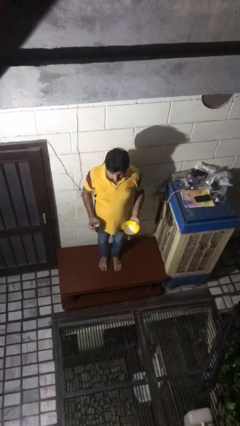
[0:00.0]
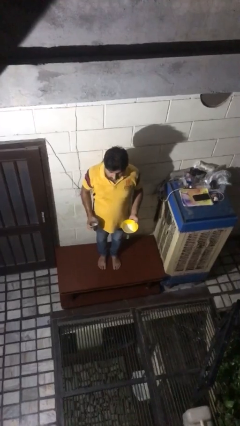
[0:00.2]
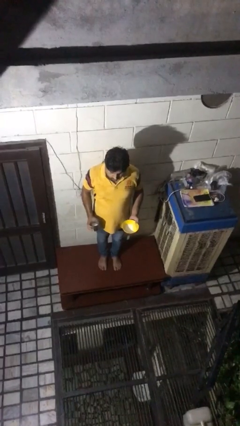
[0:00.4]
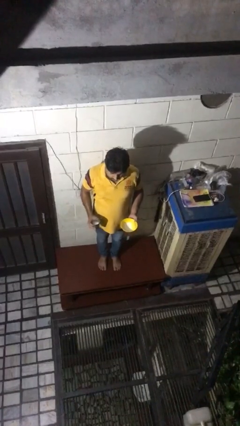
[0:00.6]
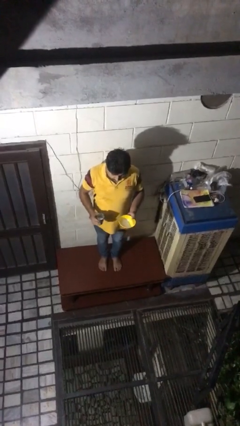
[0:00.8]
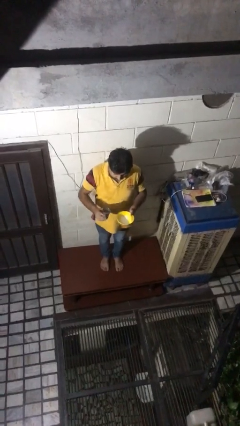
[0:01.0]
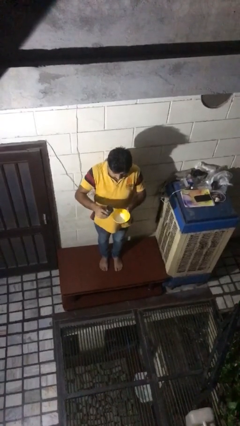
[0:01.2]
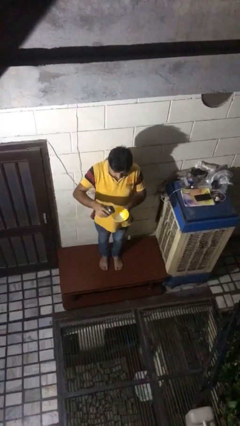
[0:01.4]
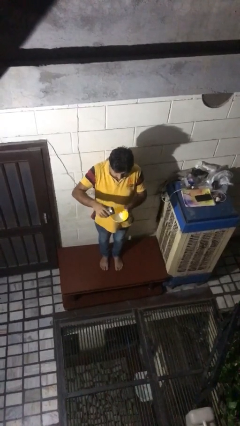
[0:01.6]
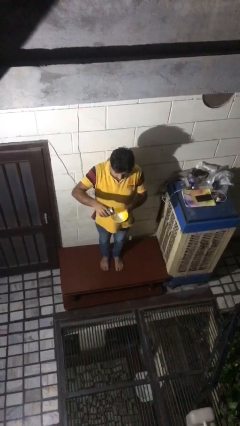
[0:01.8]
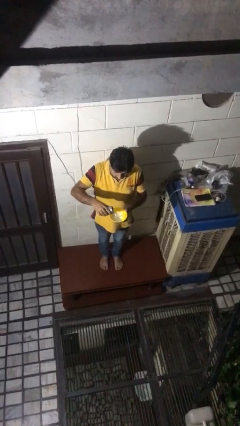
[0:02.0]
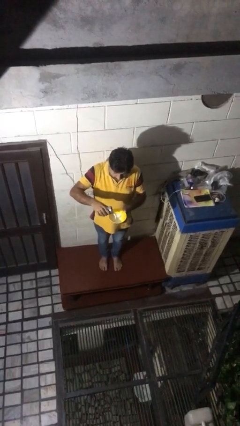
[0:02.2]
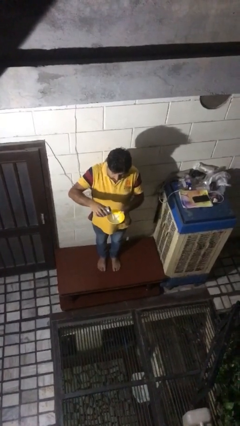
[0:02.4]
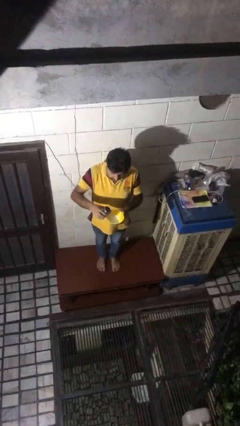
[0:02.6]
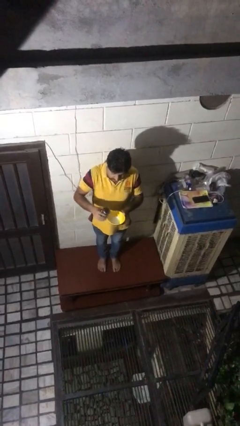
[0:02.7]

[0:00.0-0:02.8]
person pours into bowl

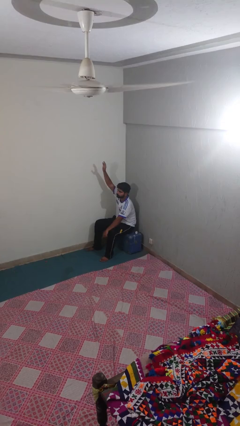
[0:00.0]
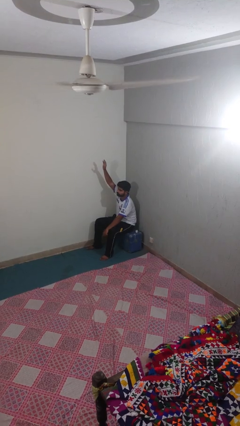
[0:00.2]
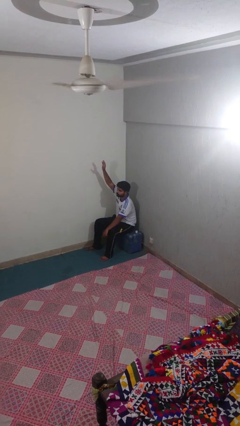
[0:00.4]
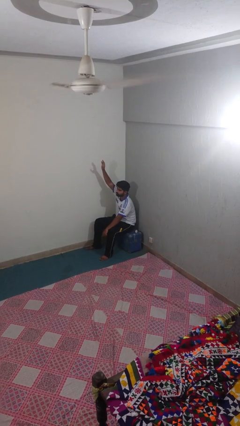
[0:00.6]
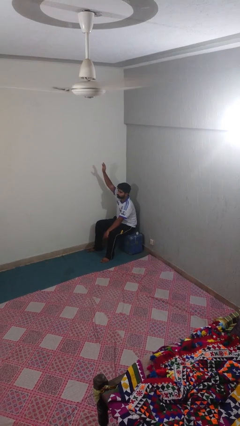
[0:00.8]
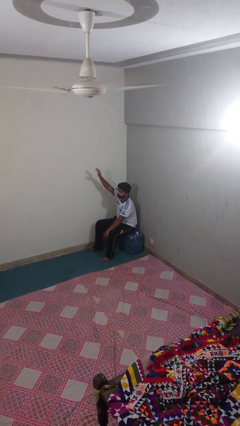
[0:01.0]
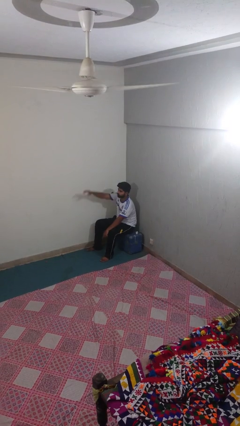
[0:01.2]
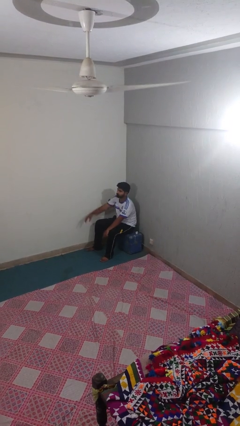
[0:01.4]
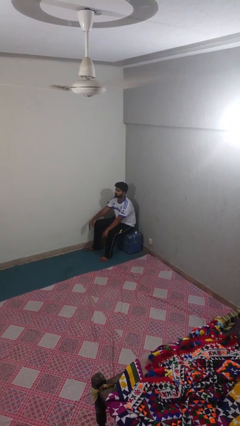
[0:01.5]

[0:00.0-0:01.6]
person gestures lower hand

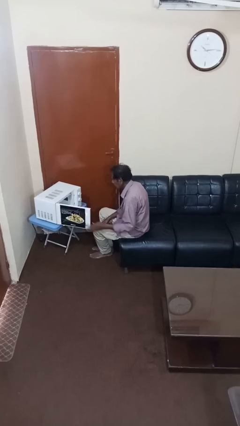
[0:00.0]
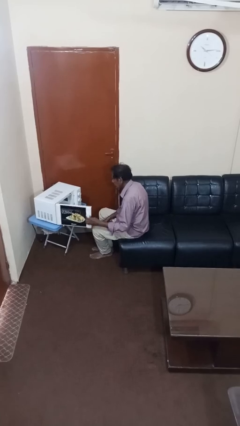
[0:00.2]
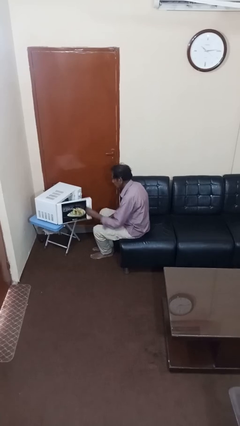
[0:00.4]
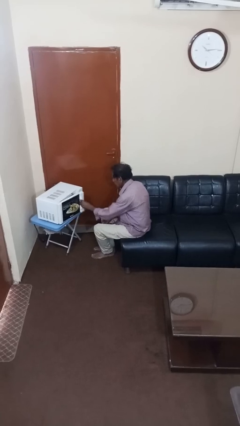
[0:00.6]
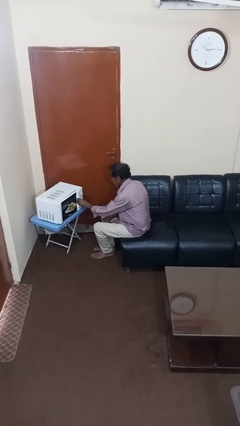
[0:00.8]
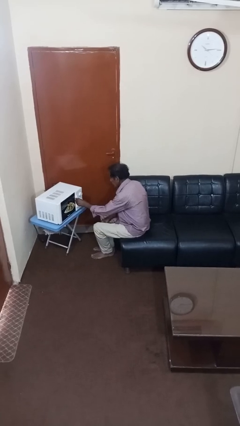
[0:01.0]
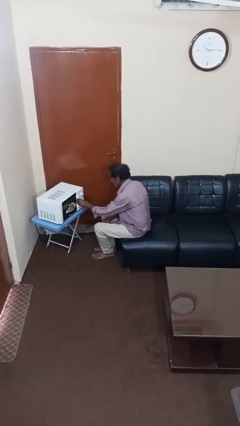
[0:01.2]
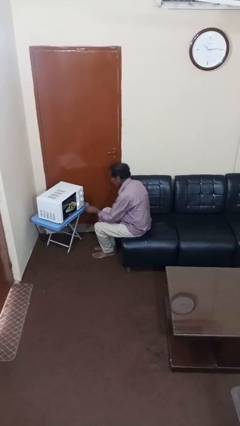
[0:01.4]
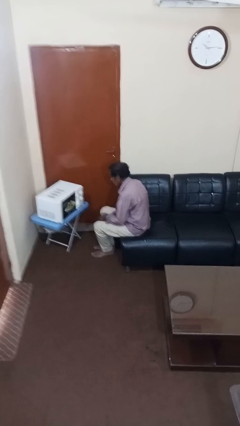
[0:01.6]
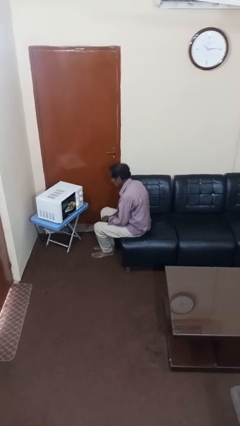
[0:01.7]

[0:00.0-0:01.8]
person closes microwave

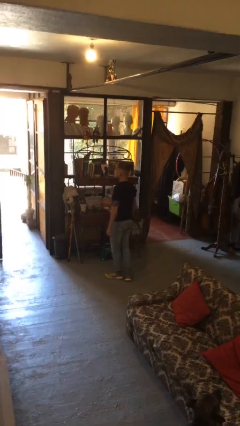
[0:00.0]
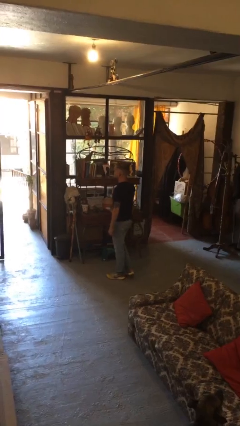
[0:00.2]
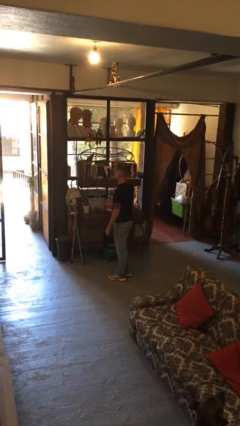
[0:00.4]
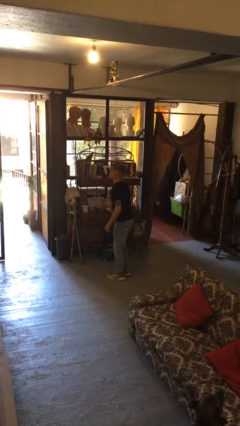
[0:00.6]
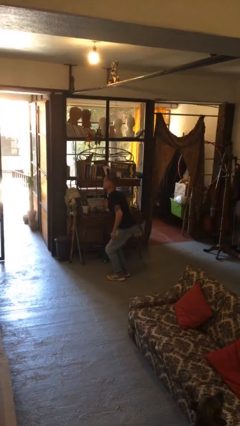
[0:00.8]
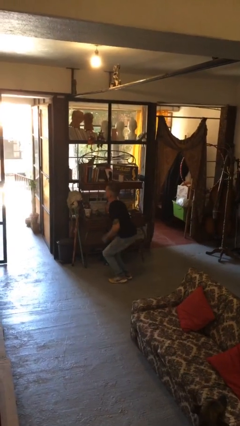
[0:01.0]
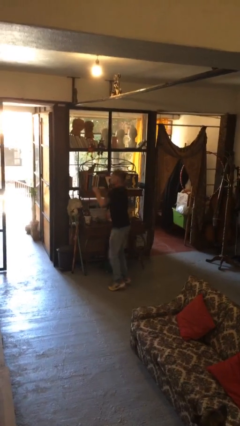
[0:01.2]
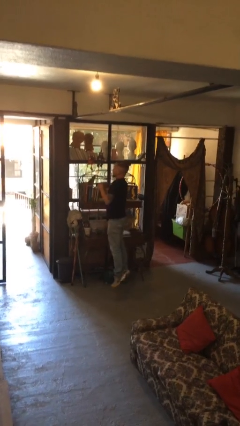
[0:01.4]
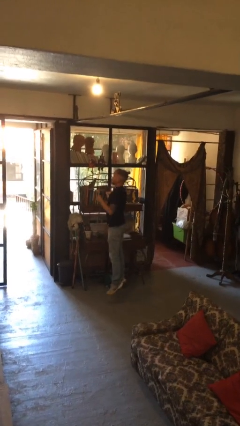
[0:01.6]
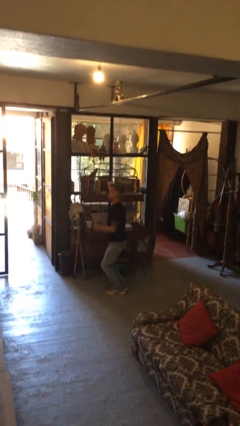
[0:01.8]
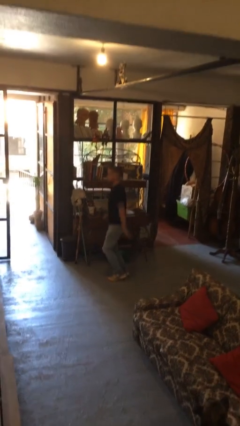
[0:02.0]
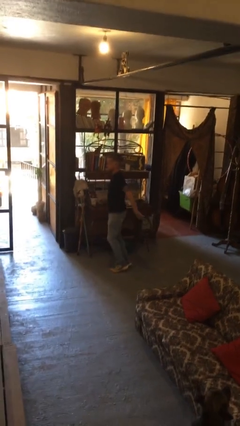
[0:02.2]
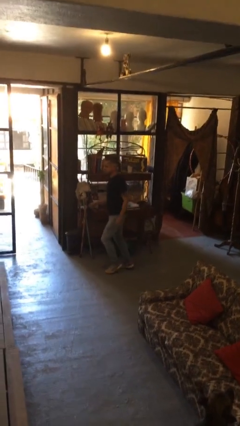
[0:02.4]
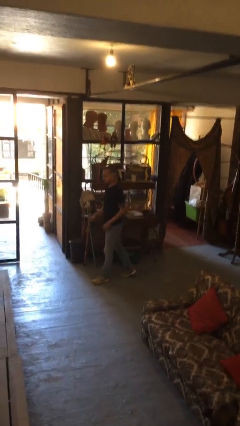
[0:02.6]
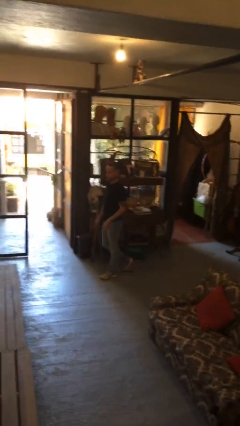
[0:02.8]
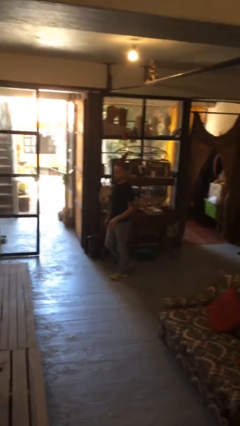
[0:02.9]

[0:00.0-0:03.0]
person jumps

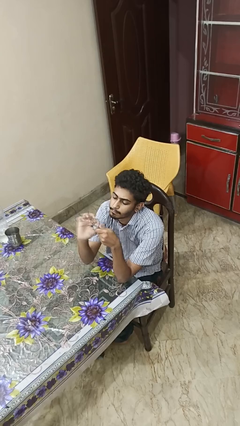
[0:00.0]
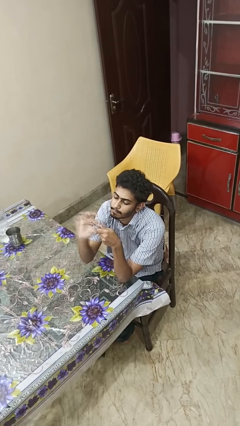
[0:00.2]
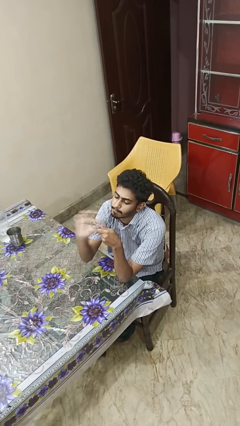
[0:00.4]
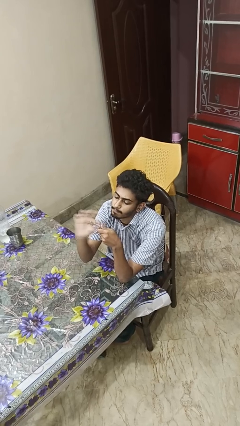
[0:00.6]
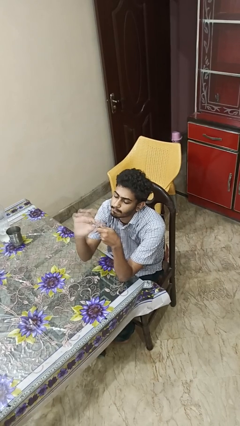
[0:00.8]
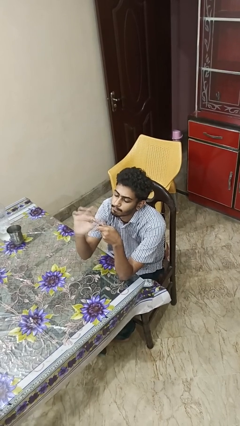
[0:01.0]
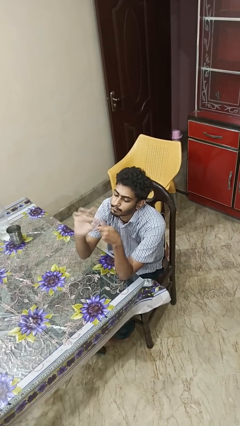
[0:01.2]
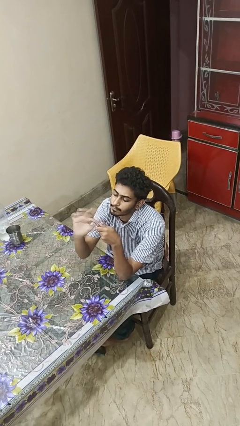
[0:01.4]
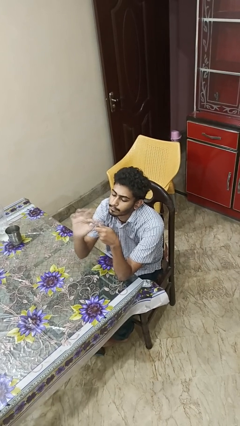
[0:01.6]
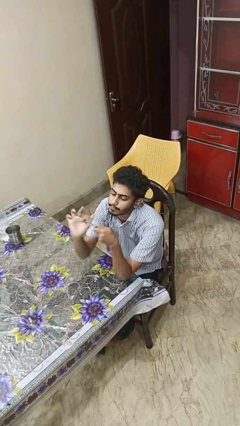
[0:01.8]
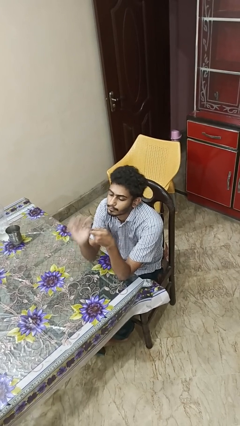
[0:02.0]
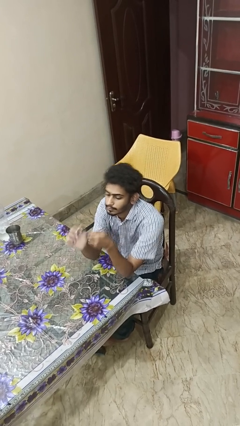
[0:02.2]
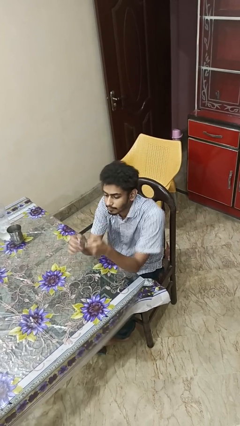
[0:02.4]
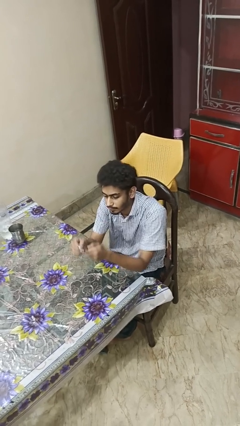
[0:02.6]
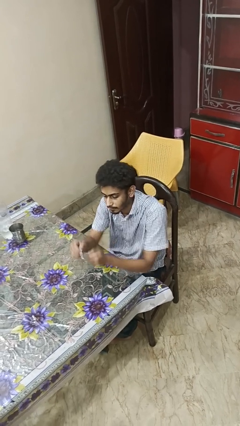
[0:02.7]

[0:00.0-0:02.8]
person files fingernails

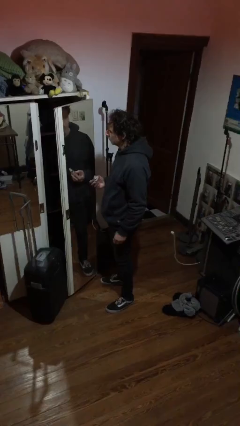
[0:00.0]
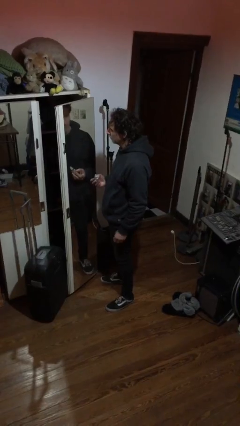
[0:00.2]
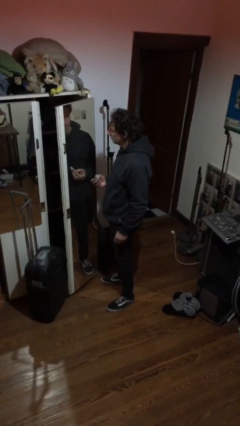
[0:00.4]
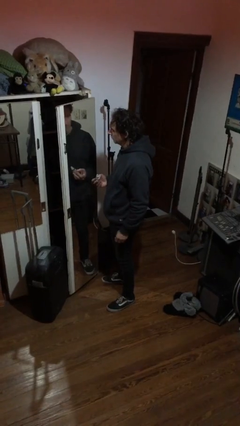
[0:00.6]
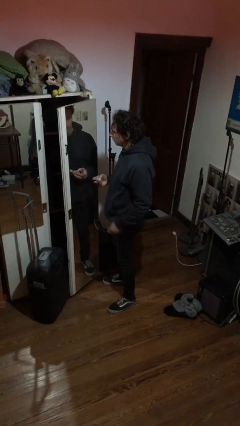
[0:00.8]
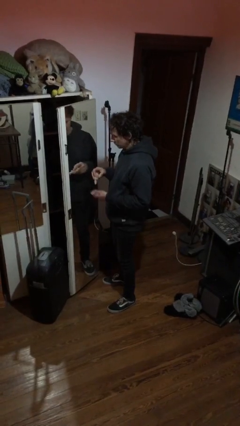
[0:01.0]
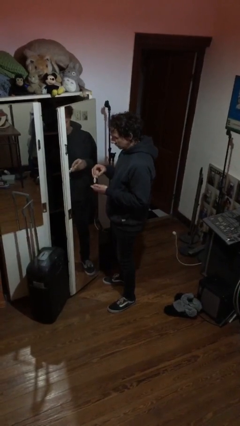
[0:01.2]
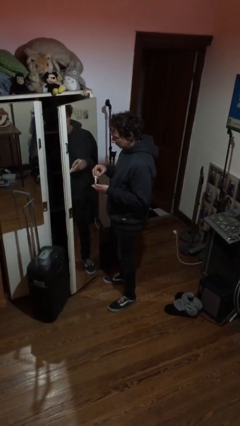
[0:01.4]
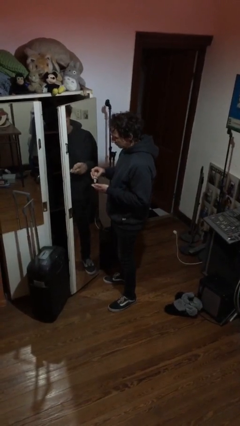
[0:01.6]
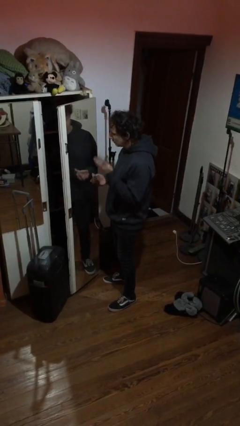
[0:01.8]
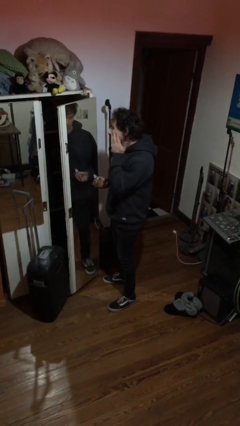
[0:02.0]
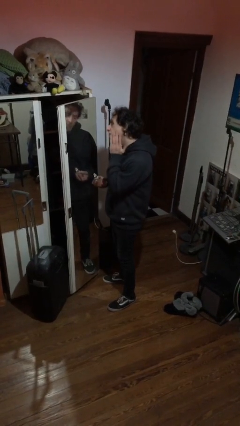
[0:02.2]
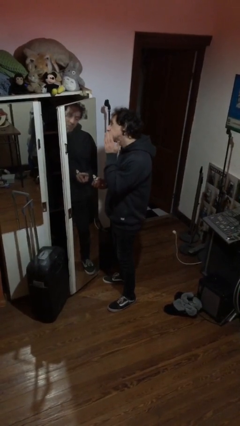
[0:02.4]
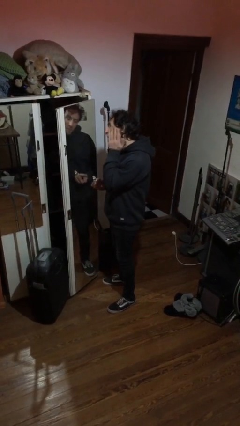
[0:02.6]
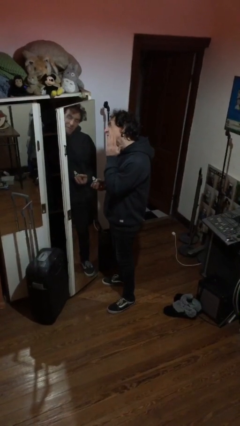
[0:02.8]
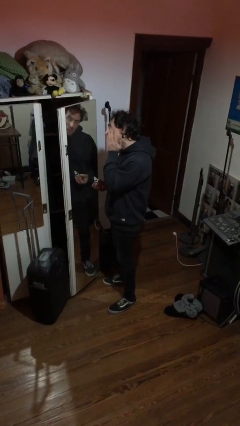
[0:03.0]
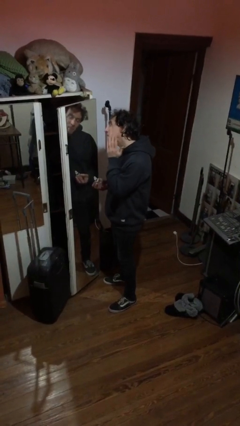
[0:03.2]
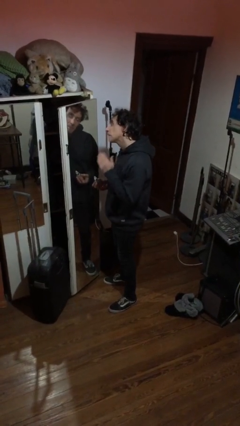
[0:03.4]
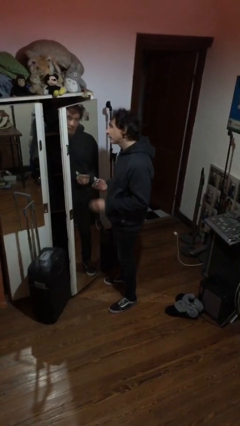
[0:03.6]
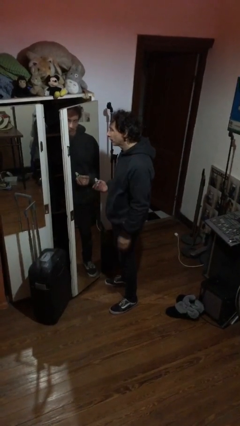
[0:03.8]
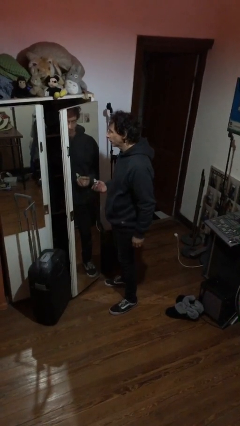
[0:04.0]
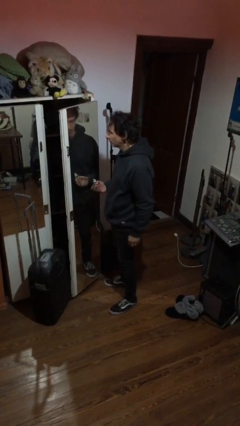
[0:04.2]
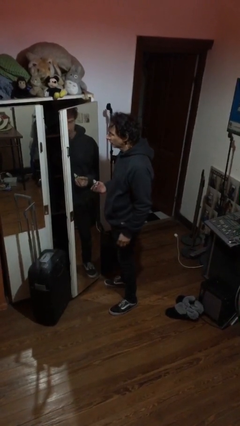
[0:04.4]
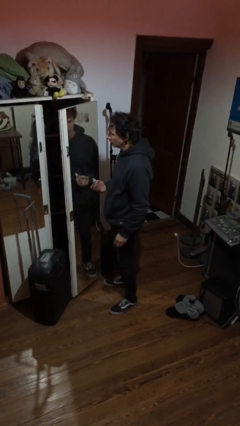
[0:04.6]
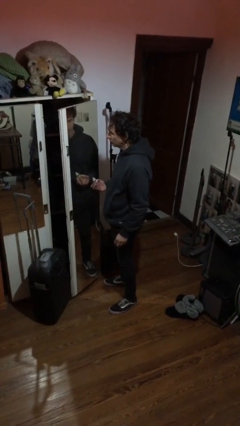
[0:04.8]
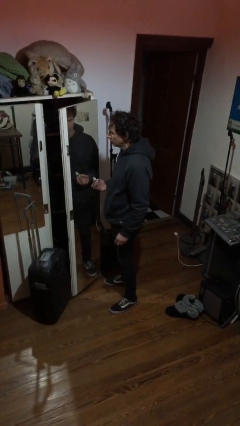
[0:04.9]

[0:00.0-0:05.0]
person applies foundation makeup
